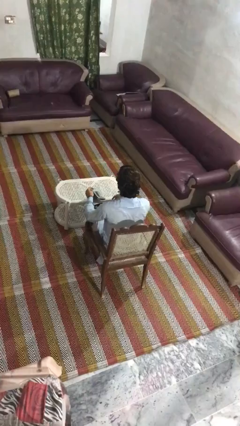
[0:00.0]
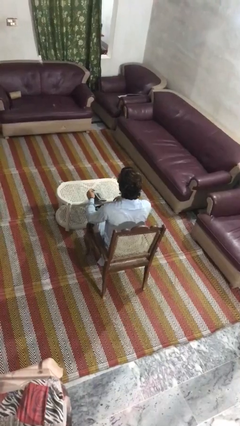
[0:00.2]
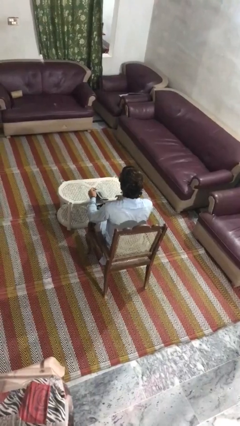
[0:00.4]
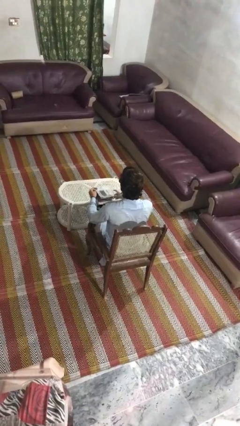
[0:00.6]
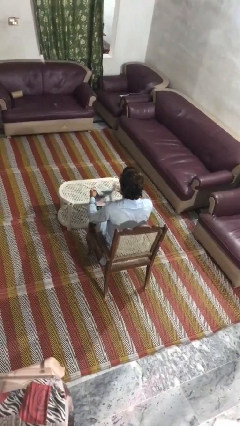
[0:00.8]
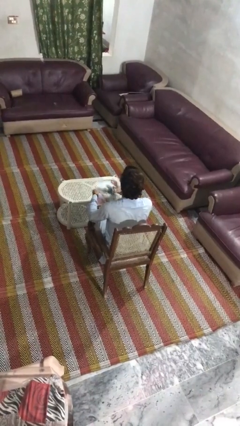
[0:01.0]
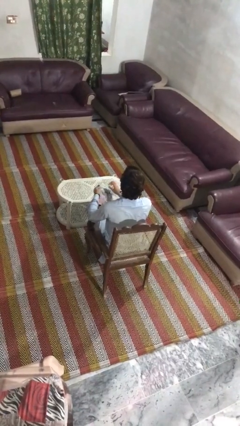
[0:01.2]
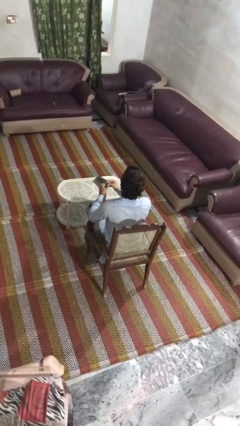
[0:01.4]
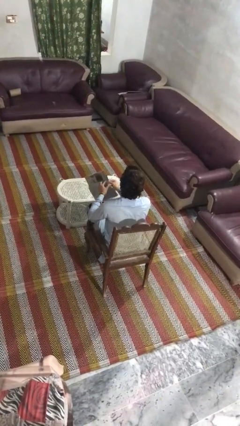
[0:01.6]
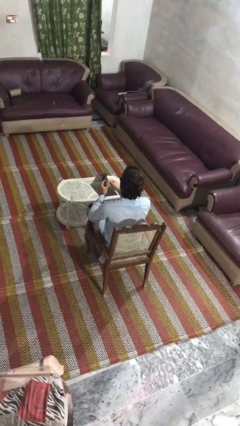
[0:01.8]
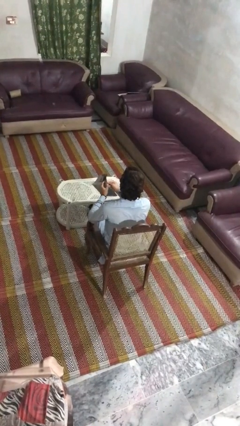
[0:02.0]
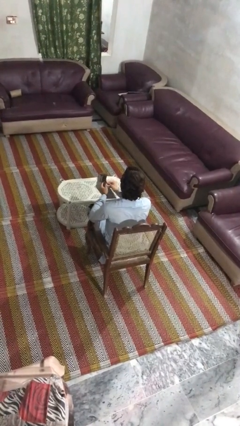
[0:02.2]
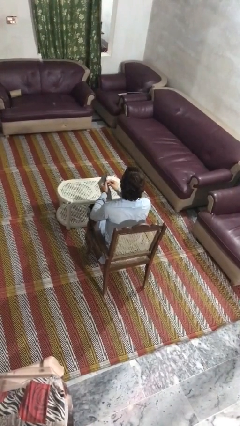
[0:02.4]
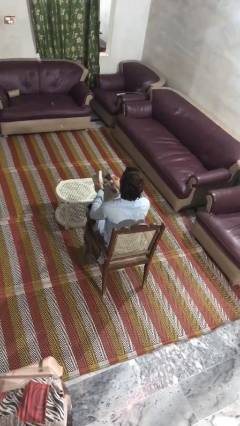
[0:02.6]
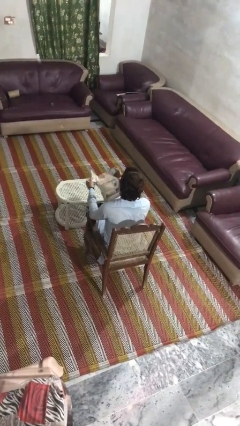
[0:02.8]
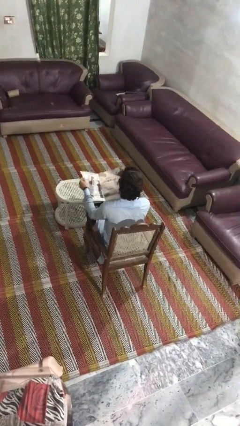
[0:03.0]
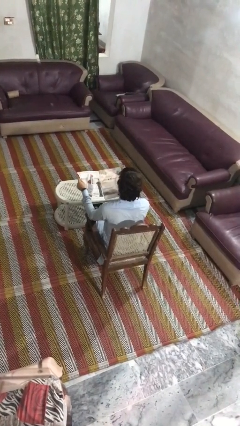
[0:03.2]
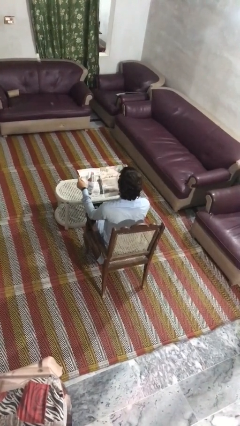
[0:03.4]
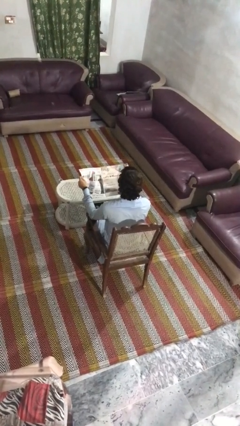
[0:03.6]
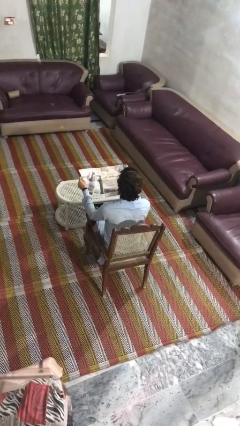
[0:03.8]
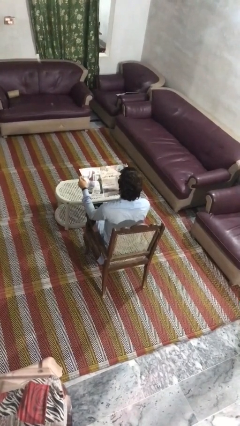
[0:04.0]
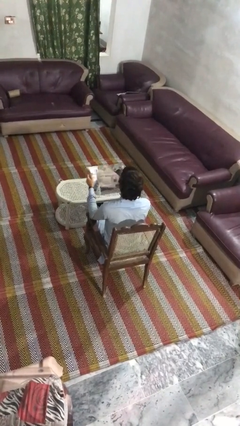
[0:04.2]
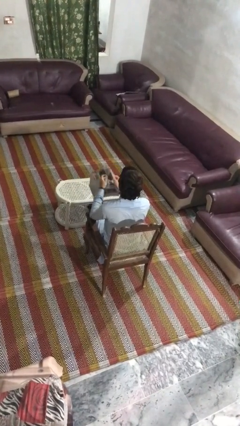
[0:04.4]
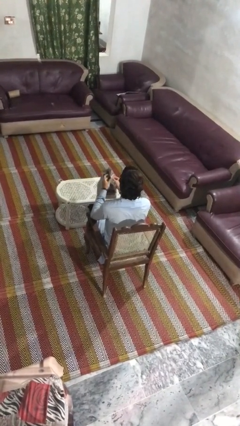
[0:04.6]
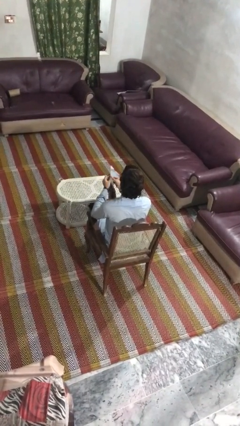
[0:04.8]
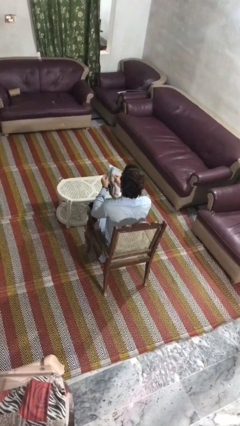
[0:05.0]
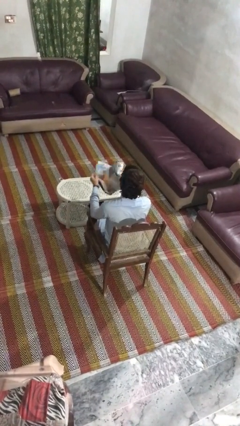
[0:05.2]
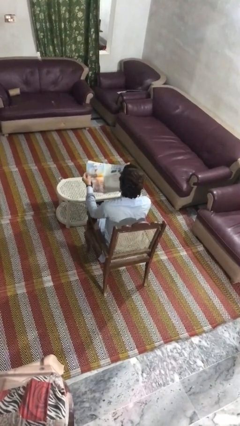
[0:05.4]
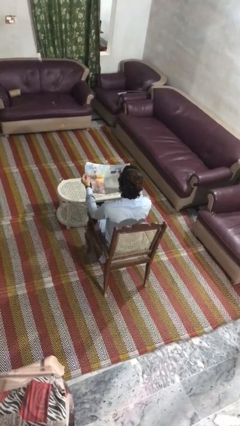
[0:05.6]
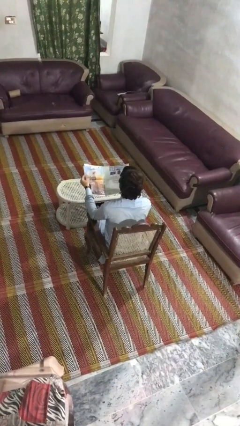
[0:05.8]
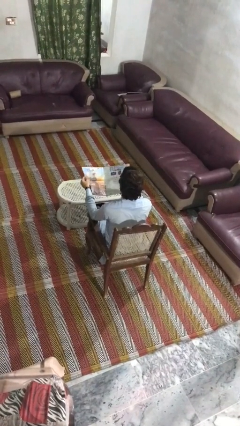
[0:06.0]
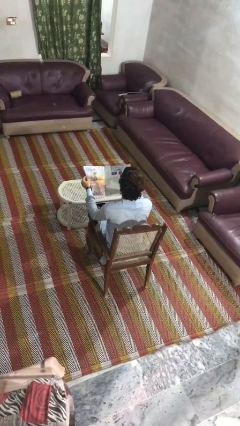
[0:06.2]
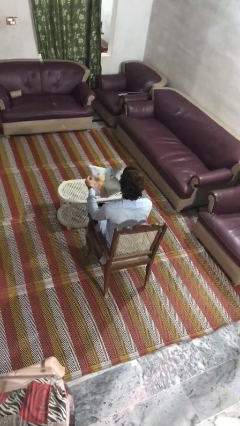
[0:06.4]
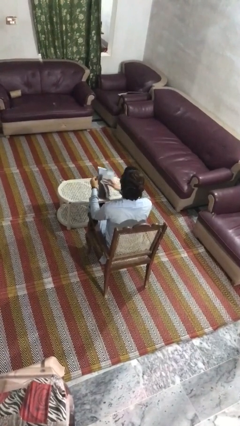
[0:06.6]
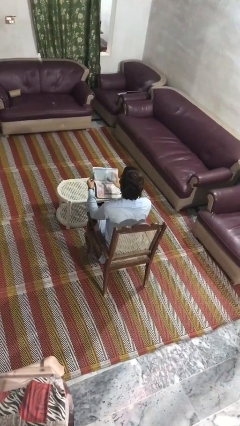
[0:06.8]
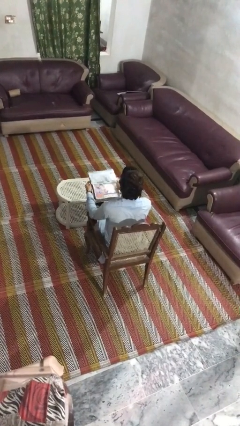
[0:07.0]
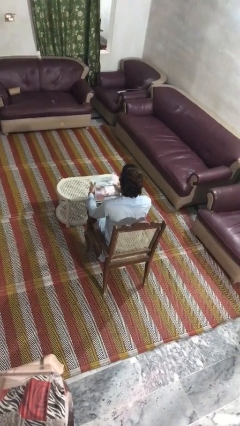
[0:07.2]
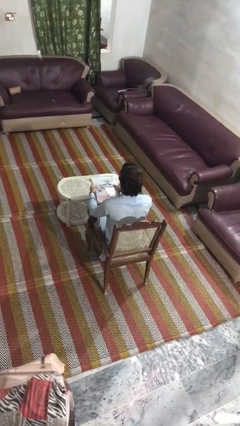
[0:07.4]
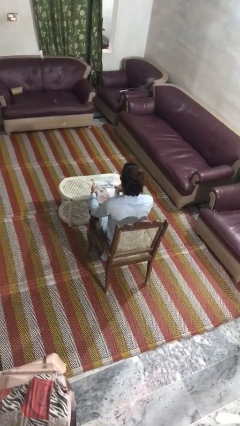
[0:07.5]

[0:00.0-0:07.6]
person reads magazine

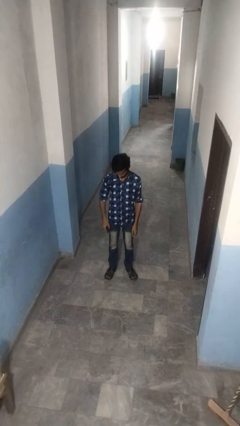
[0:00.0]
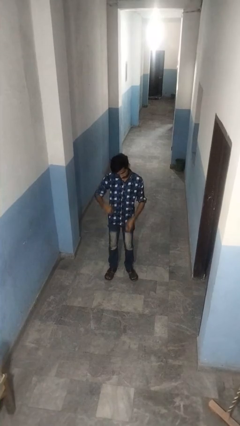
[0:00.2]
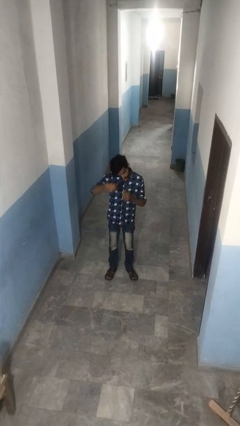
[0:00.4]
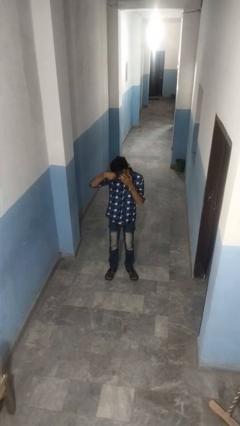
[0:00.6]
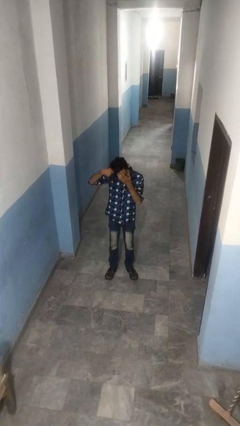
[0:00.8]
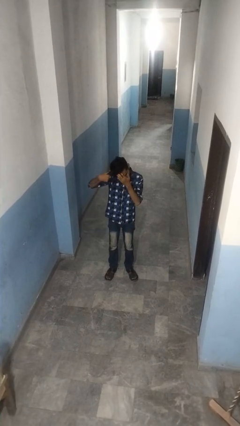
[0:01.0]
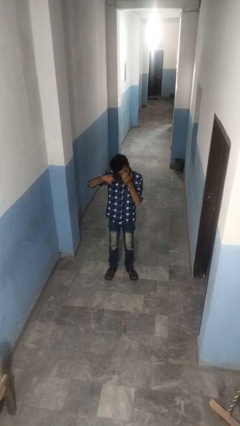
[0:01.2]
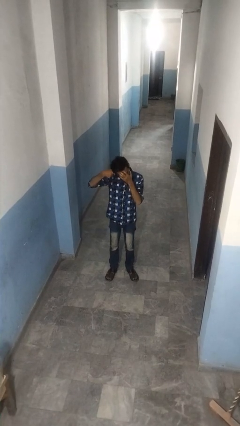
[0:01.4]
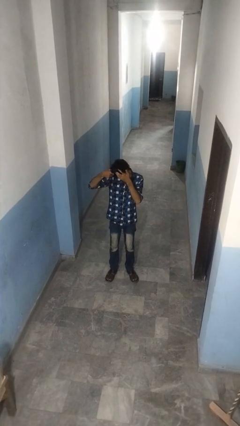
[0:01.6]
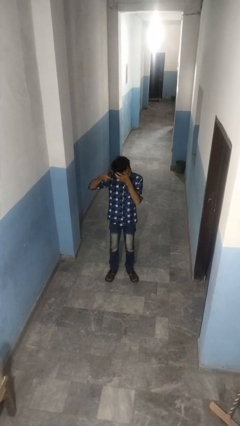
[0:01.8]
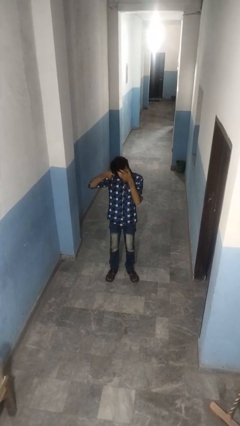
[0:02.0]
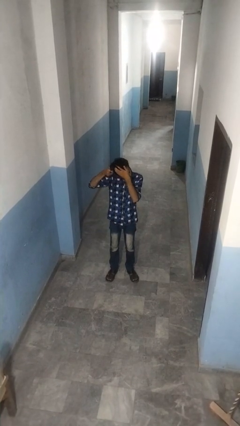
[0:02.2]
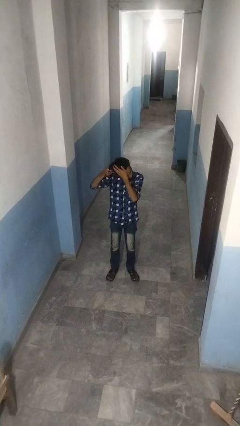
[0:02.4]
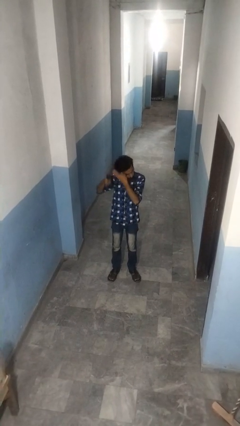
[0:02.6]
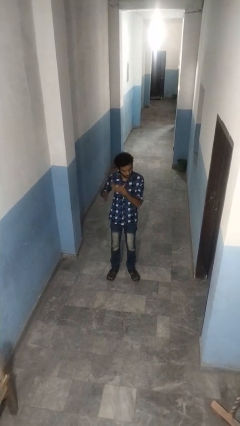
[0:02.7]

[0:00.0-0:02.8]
person brushes hair

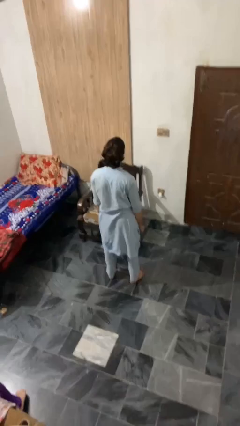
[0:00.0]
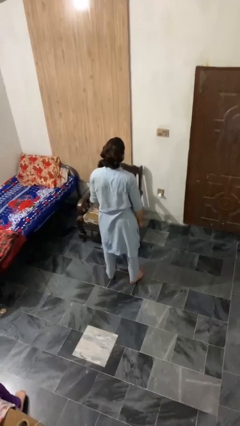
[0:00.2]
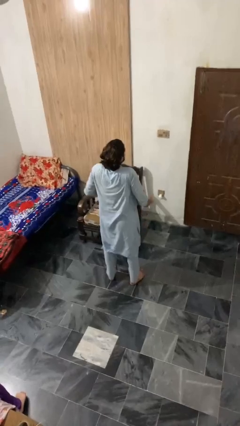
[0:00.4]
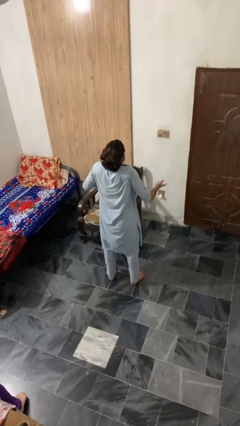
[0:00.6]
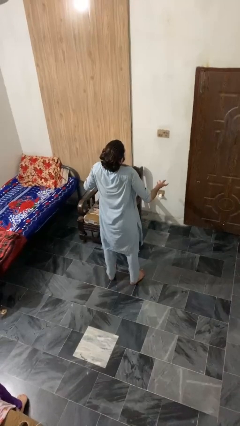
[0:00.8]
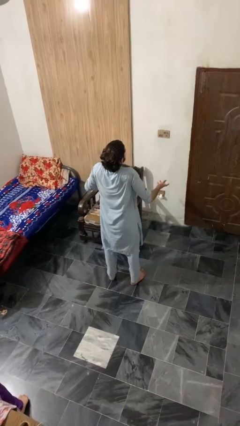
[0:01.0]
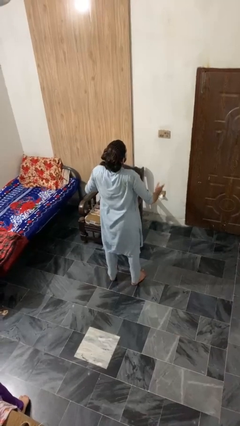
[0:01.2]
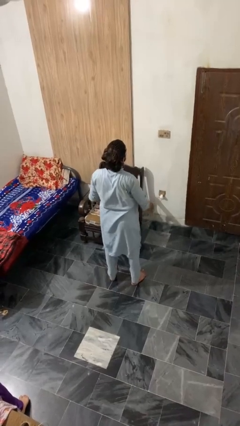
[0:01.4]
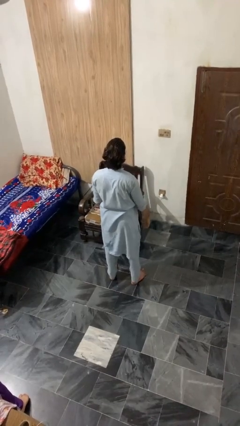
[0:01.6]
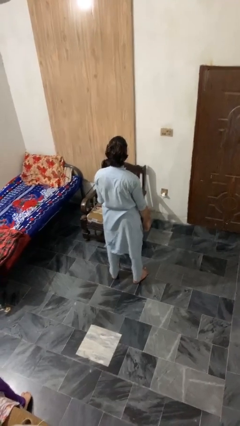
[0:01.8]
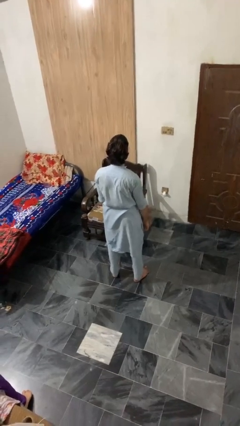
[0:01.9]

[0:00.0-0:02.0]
person shrugs

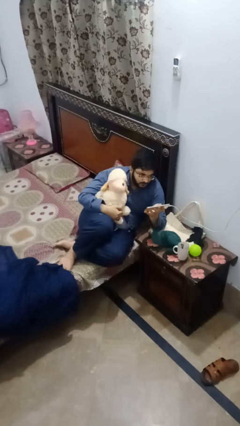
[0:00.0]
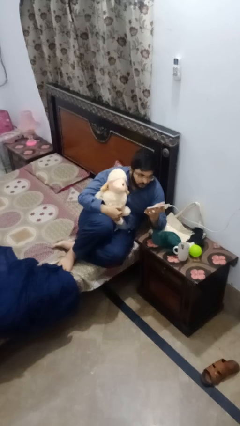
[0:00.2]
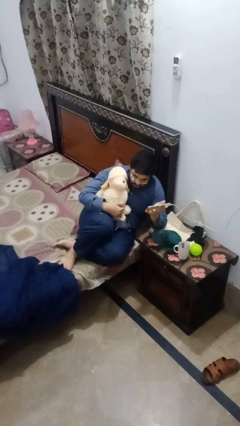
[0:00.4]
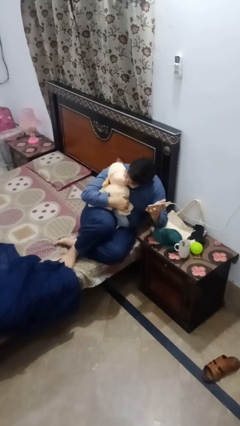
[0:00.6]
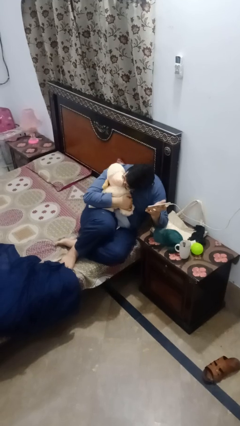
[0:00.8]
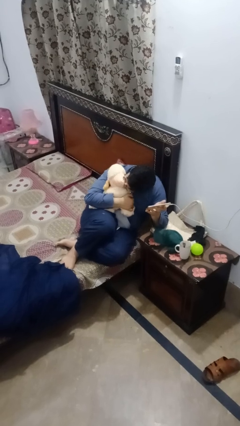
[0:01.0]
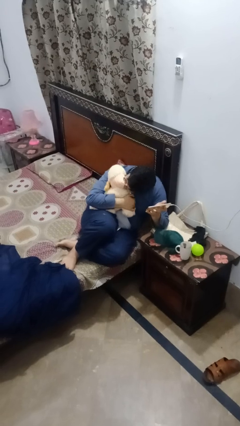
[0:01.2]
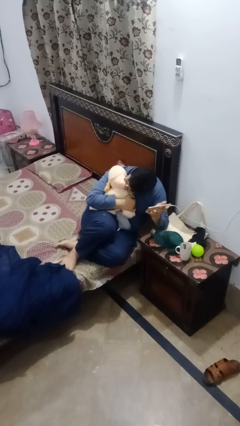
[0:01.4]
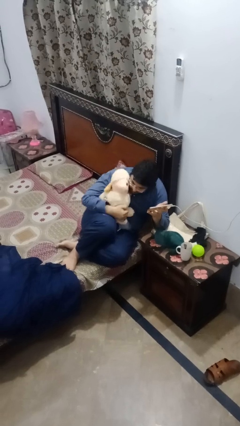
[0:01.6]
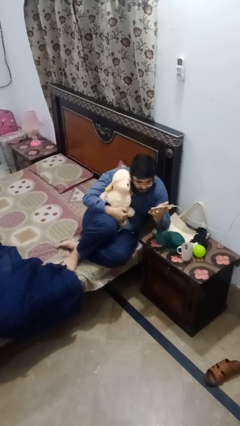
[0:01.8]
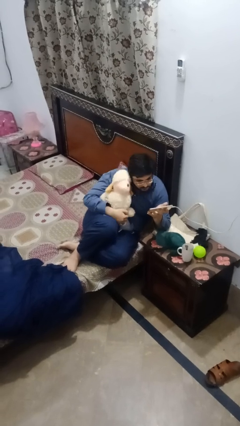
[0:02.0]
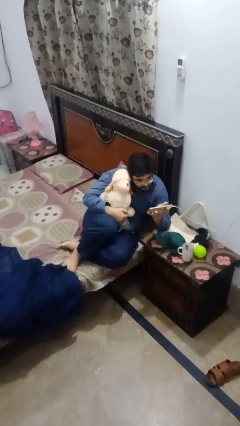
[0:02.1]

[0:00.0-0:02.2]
person hugs stuffed animal

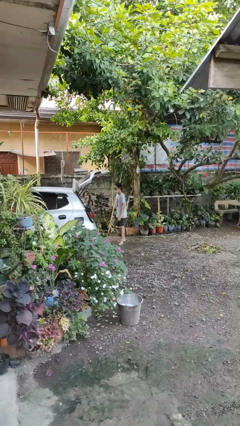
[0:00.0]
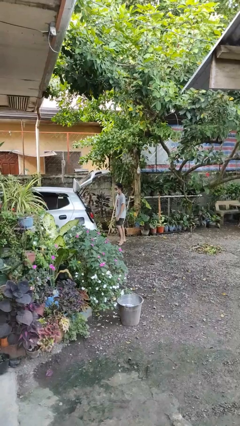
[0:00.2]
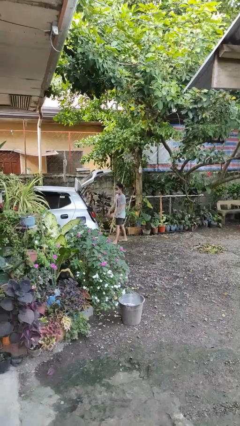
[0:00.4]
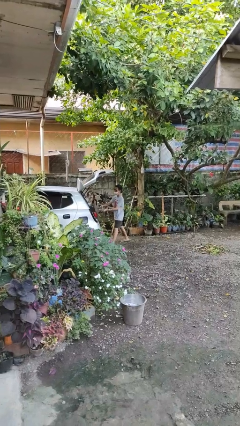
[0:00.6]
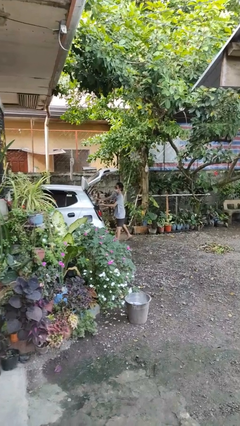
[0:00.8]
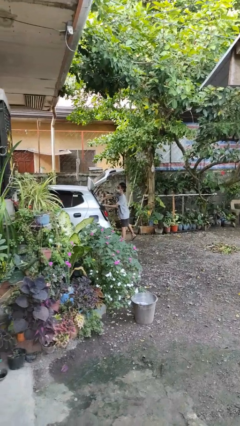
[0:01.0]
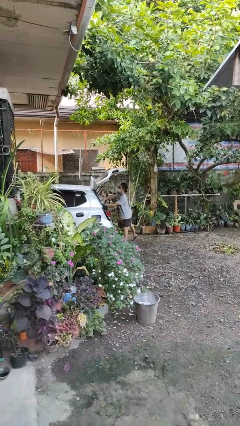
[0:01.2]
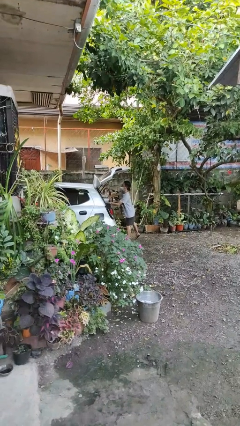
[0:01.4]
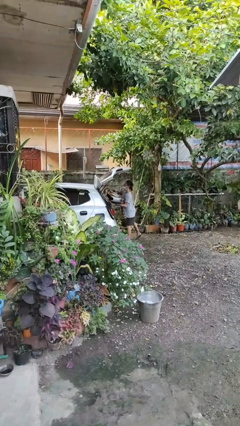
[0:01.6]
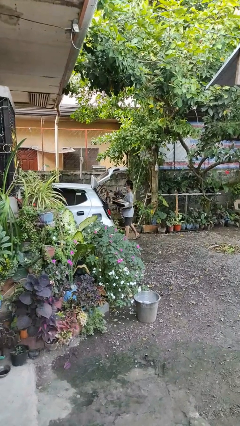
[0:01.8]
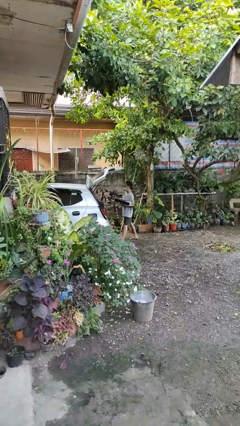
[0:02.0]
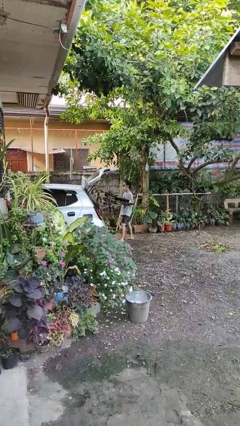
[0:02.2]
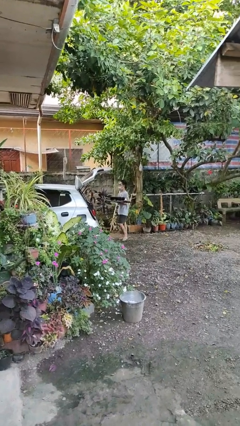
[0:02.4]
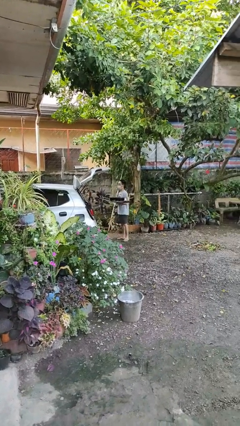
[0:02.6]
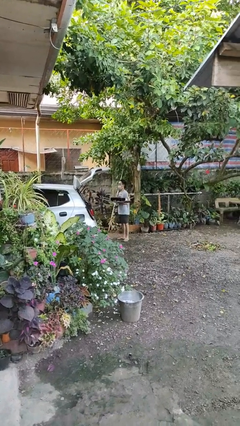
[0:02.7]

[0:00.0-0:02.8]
person unloads car

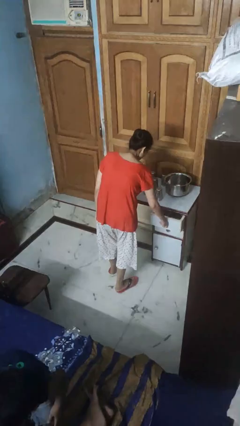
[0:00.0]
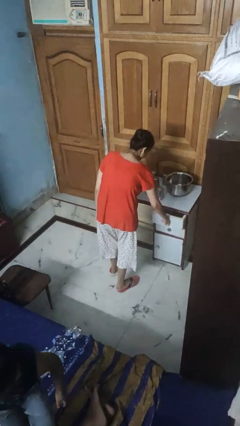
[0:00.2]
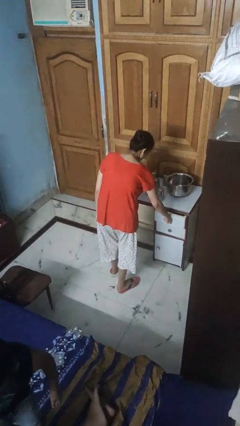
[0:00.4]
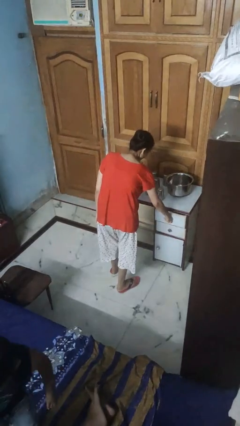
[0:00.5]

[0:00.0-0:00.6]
person closes kitchen drawer
